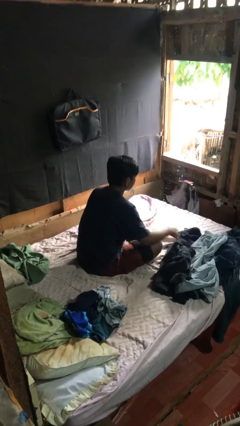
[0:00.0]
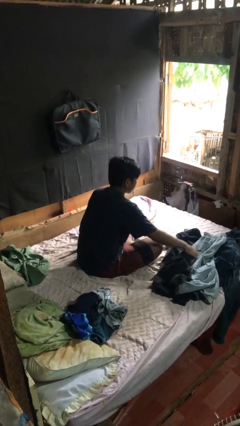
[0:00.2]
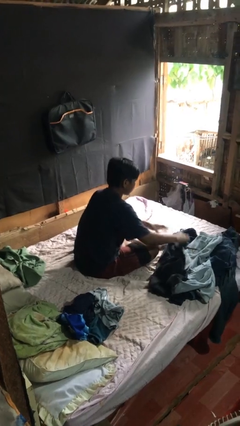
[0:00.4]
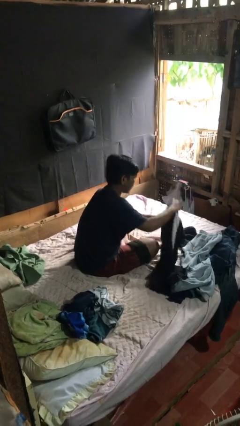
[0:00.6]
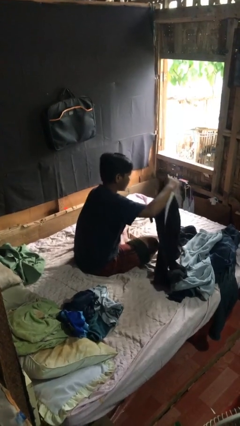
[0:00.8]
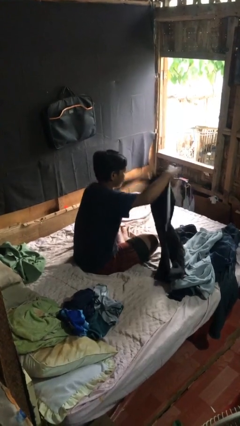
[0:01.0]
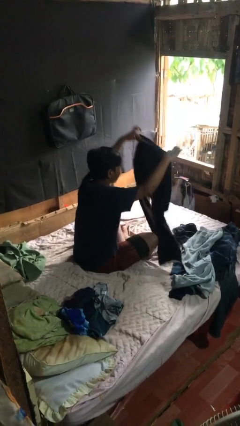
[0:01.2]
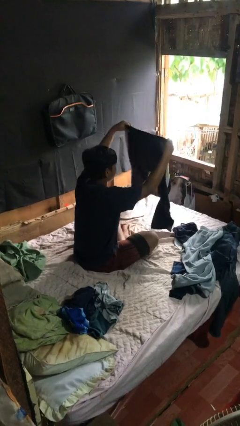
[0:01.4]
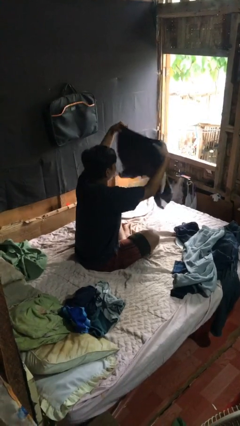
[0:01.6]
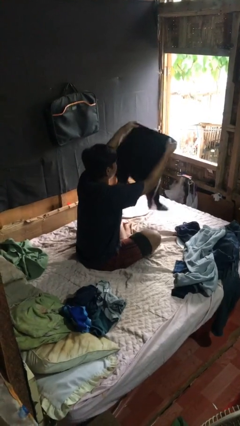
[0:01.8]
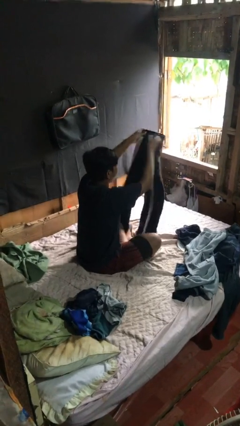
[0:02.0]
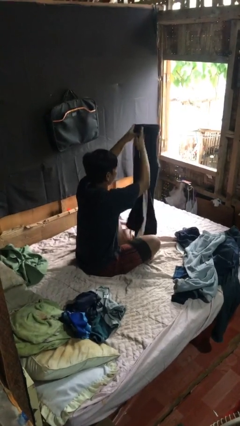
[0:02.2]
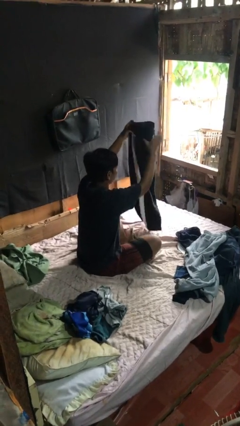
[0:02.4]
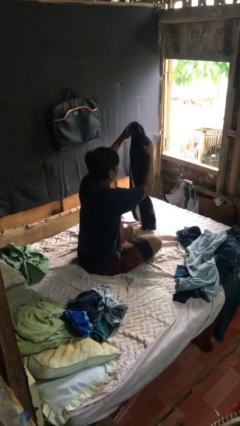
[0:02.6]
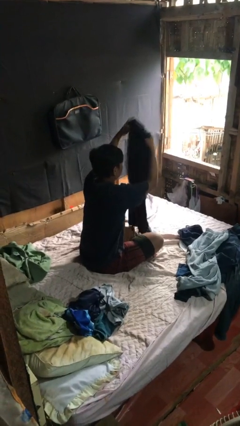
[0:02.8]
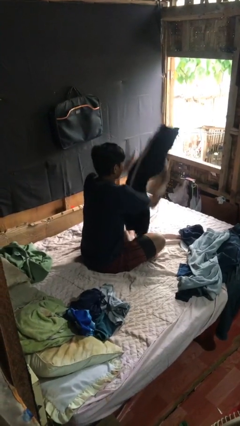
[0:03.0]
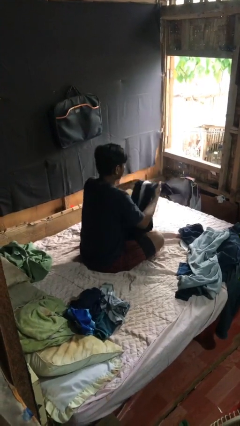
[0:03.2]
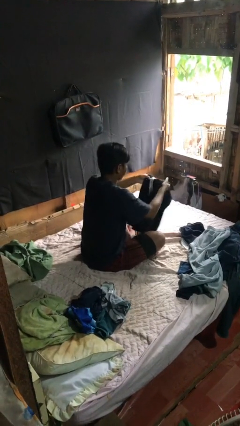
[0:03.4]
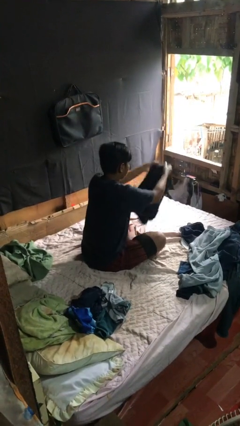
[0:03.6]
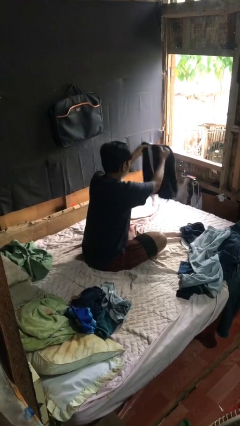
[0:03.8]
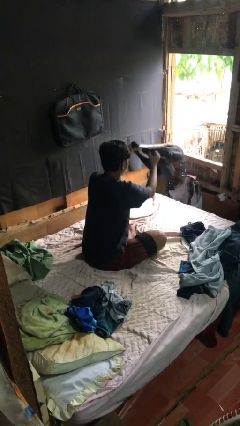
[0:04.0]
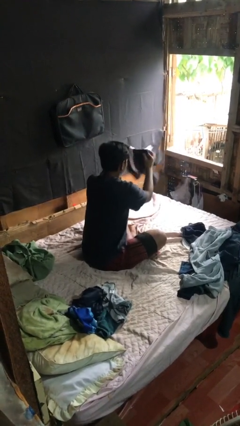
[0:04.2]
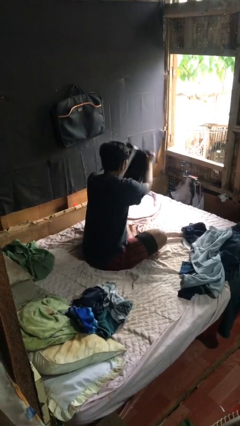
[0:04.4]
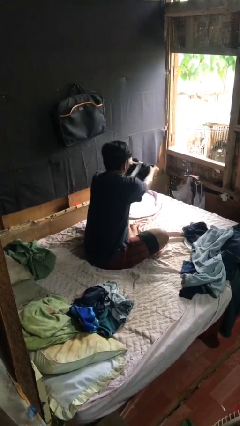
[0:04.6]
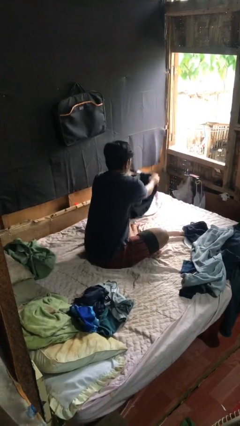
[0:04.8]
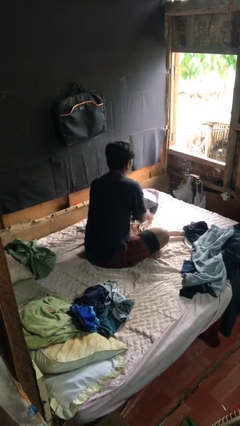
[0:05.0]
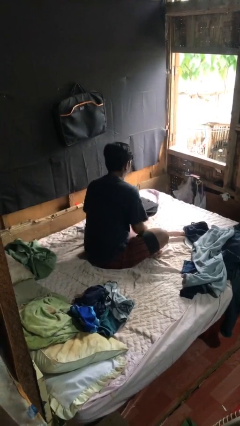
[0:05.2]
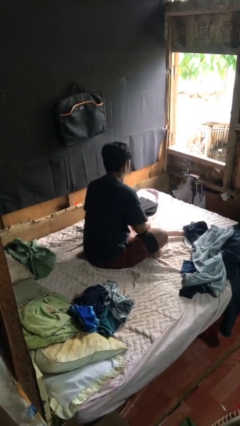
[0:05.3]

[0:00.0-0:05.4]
person folds pants

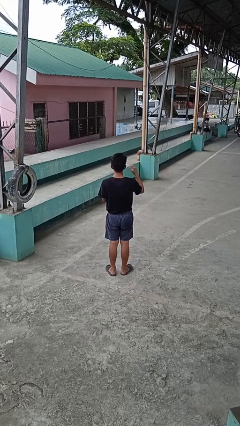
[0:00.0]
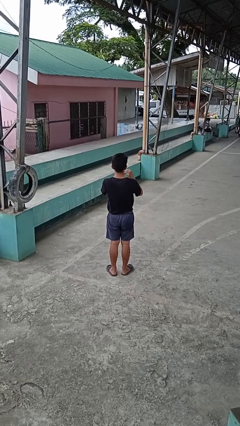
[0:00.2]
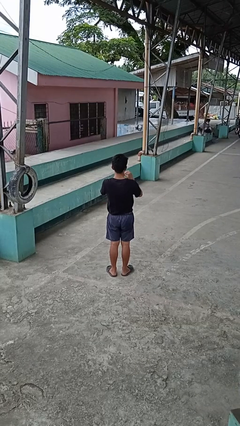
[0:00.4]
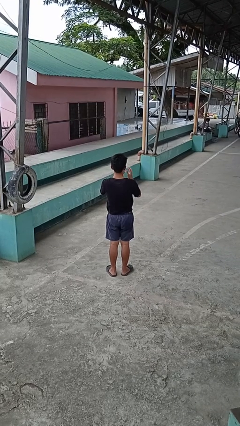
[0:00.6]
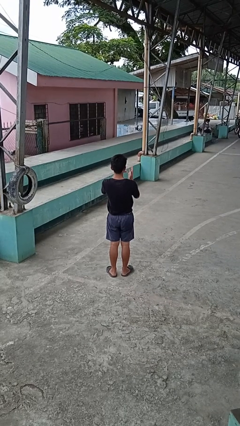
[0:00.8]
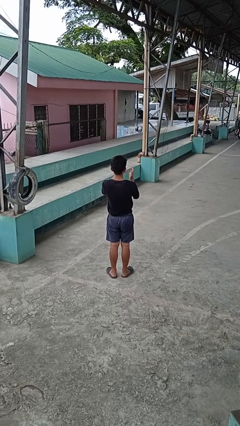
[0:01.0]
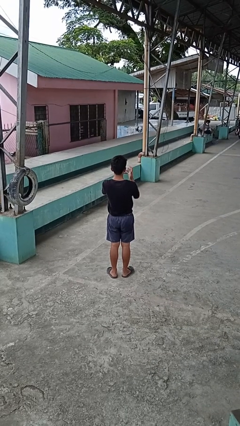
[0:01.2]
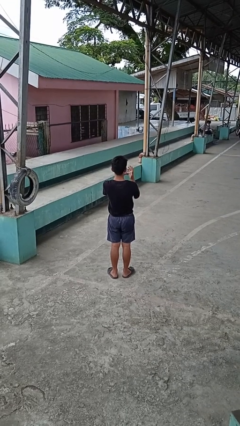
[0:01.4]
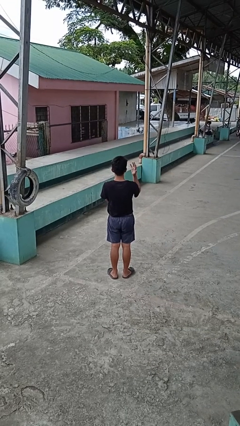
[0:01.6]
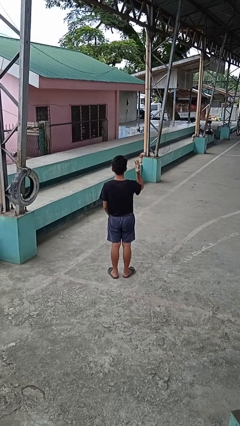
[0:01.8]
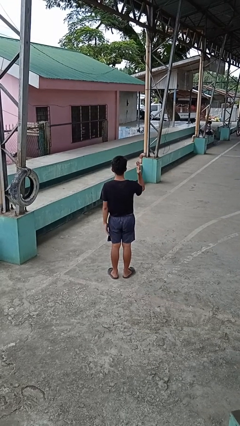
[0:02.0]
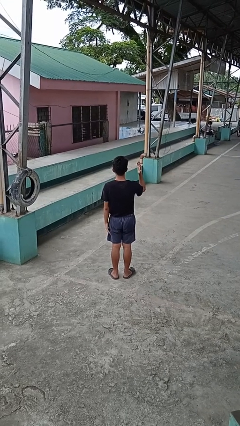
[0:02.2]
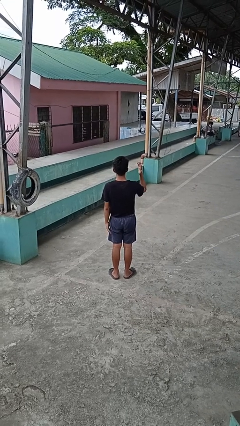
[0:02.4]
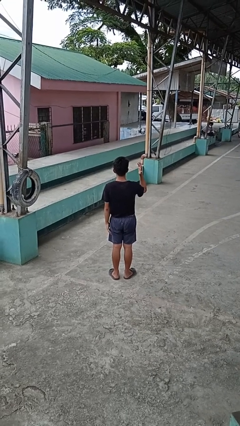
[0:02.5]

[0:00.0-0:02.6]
person puts on ring

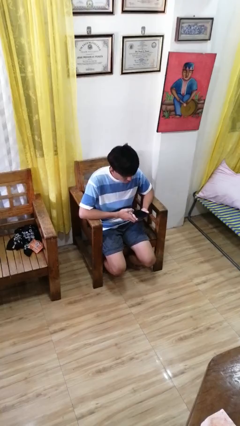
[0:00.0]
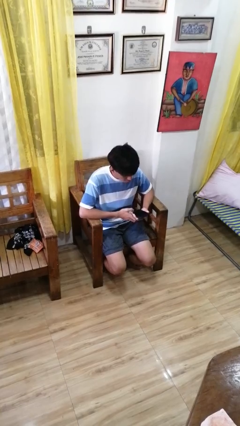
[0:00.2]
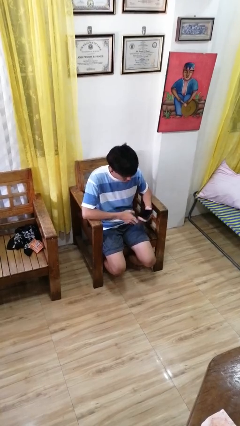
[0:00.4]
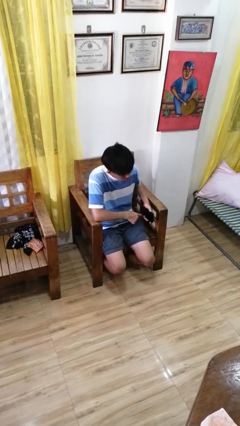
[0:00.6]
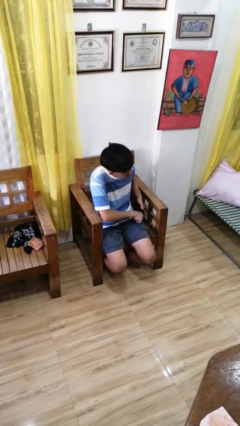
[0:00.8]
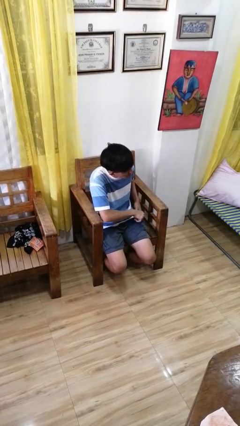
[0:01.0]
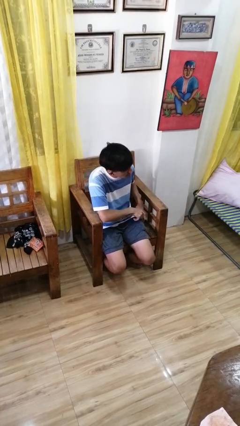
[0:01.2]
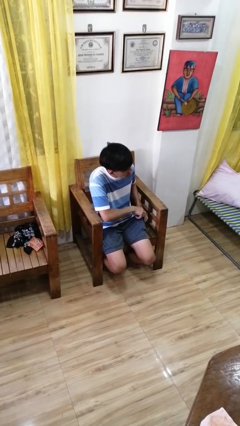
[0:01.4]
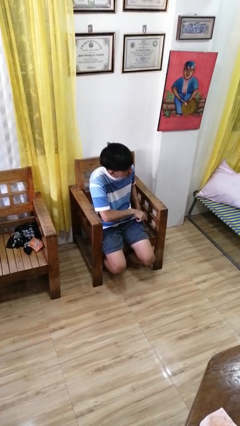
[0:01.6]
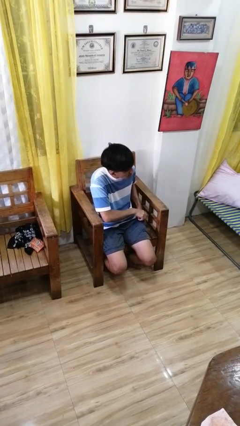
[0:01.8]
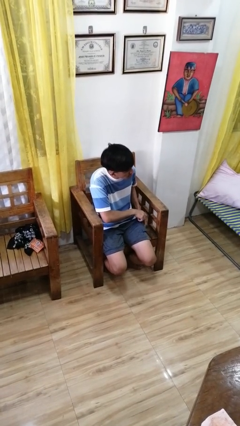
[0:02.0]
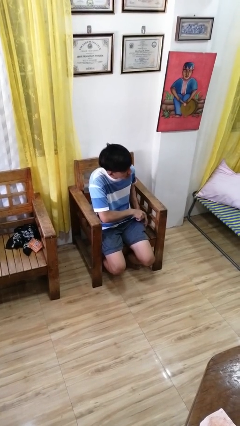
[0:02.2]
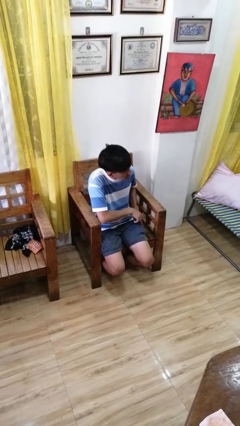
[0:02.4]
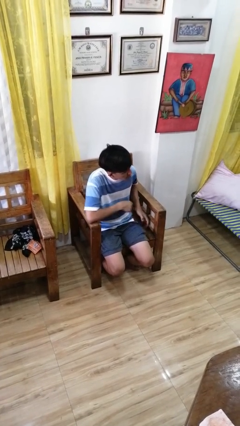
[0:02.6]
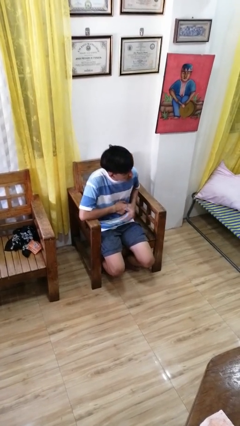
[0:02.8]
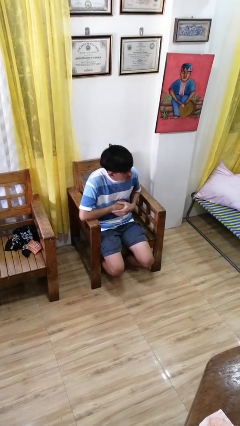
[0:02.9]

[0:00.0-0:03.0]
person puts phone into pocket

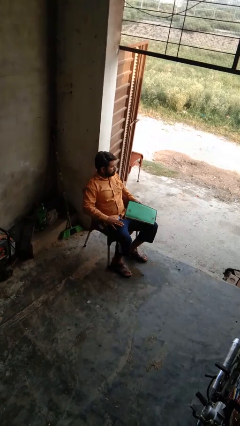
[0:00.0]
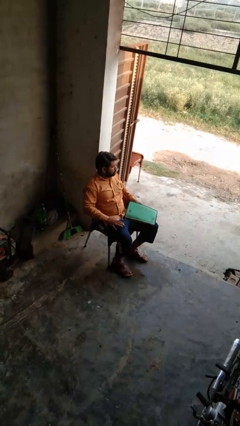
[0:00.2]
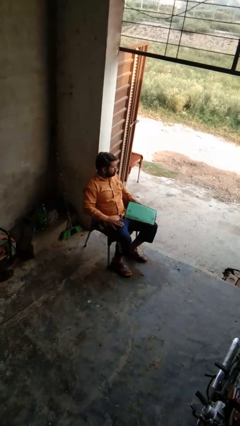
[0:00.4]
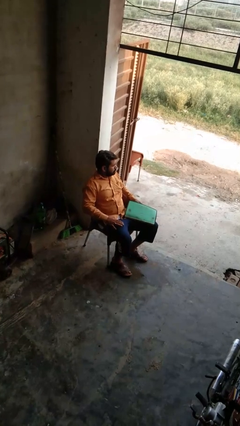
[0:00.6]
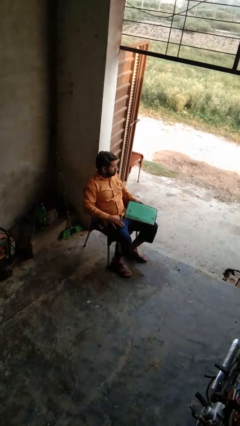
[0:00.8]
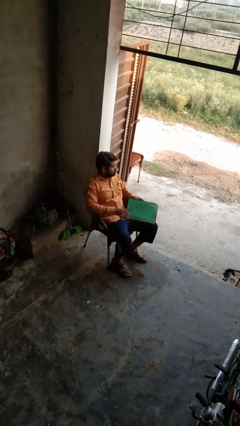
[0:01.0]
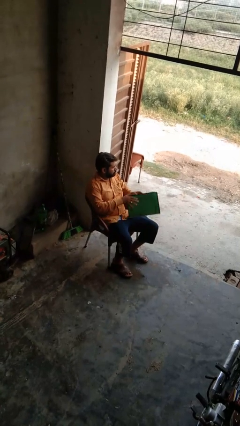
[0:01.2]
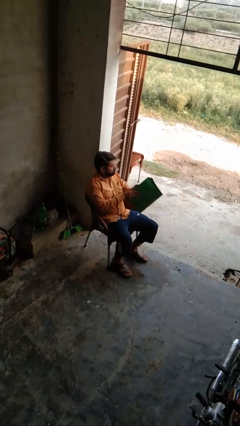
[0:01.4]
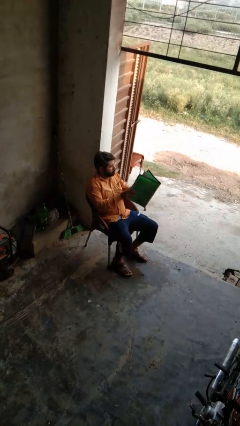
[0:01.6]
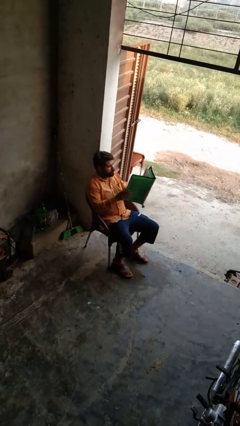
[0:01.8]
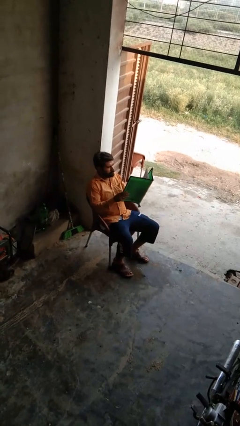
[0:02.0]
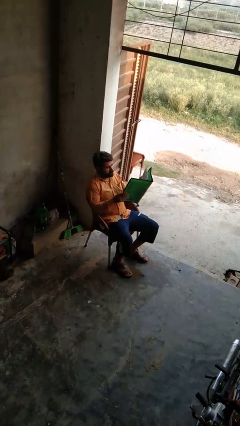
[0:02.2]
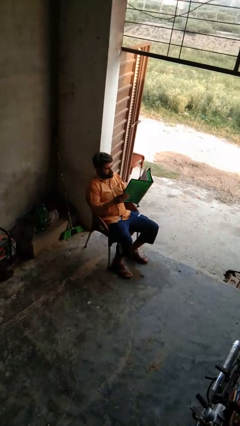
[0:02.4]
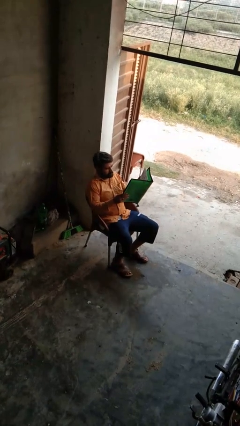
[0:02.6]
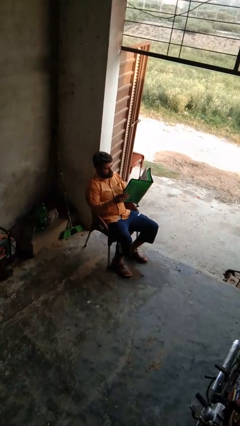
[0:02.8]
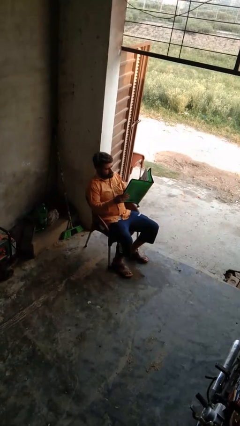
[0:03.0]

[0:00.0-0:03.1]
person reads magazine

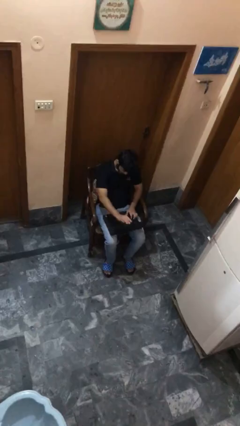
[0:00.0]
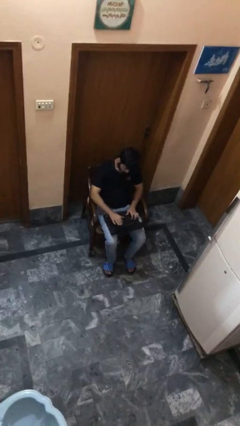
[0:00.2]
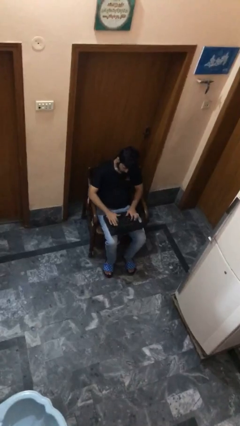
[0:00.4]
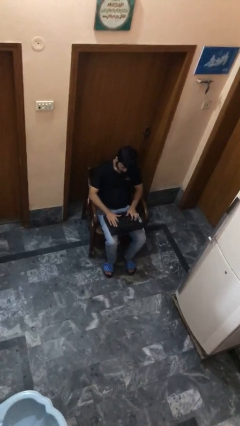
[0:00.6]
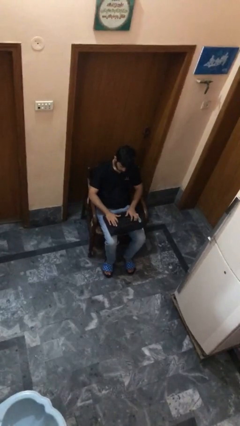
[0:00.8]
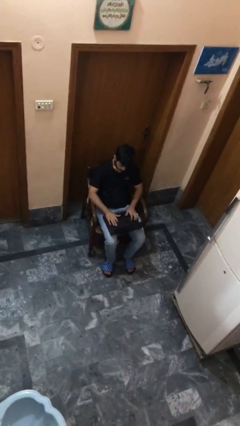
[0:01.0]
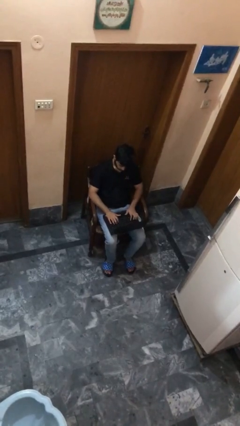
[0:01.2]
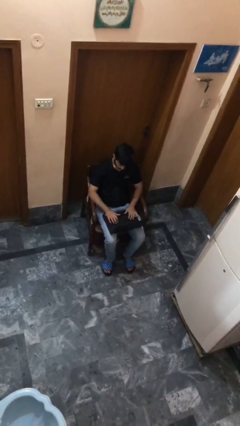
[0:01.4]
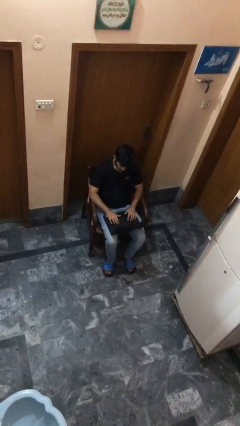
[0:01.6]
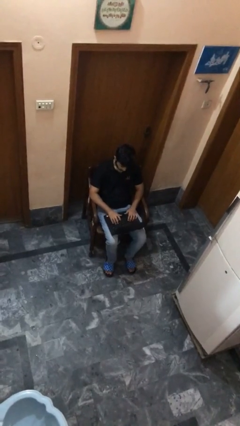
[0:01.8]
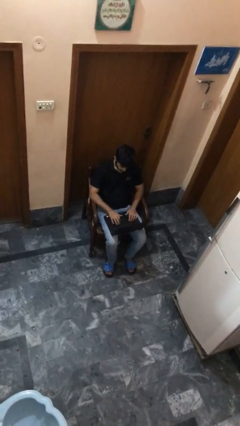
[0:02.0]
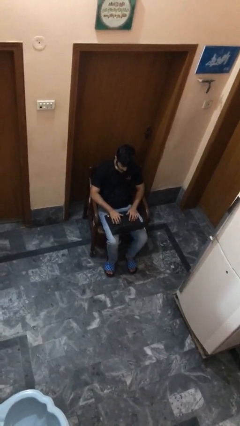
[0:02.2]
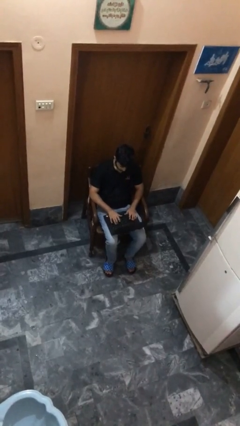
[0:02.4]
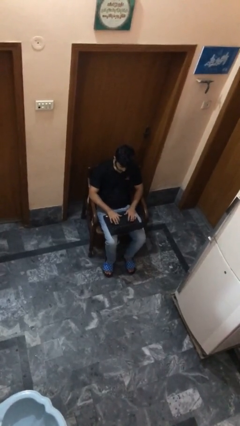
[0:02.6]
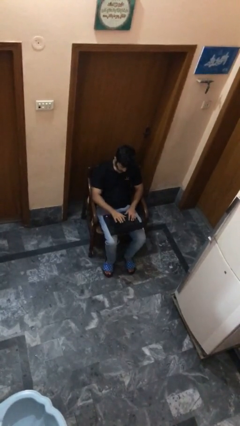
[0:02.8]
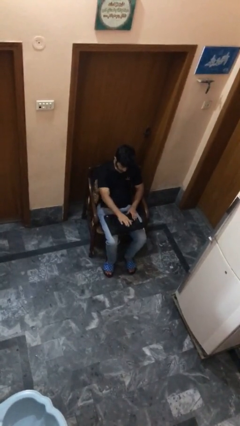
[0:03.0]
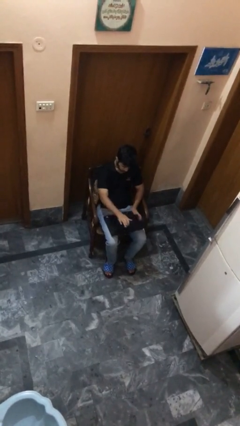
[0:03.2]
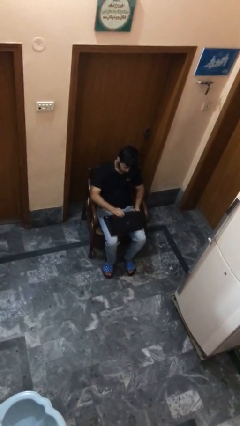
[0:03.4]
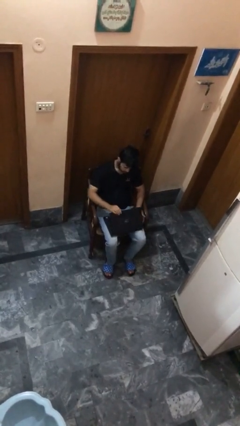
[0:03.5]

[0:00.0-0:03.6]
person interacts with laptop

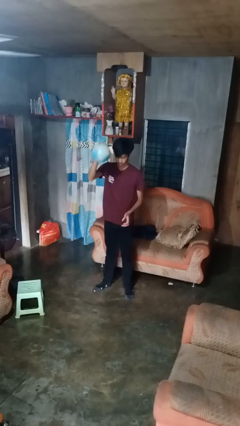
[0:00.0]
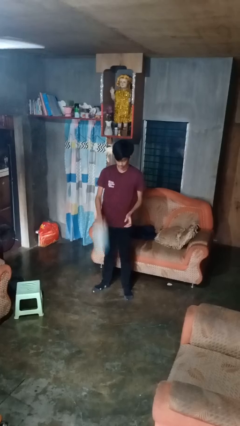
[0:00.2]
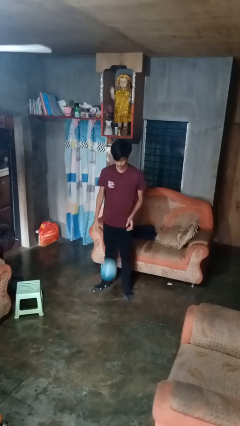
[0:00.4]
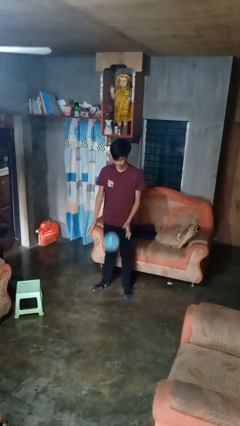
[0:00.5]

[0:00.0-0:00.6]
person bounces ball on floor
